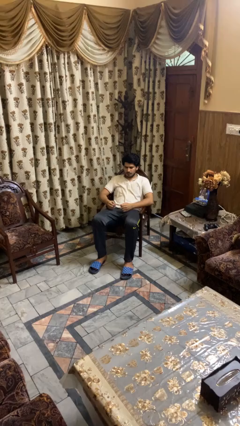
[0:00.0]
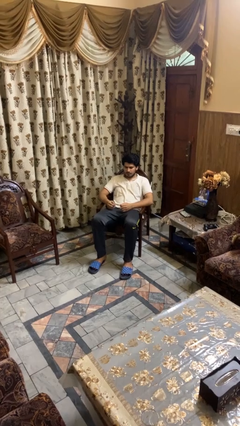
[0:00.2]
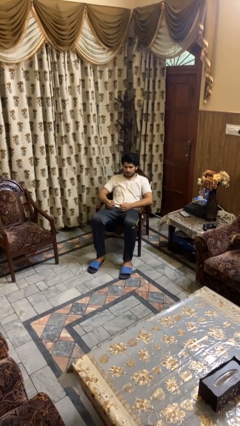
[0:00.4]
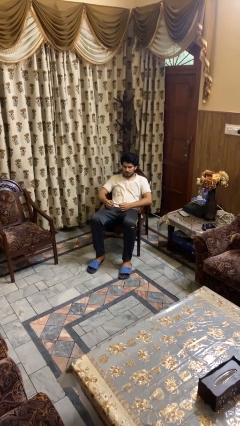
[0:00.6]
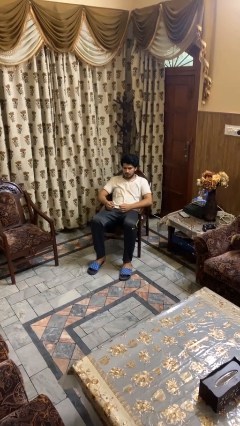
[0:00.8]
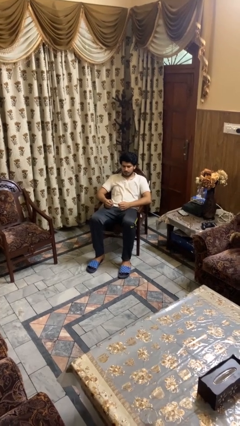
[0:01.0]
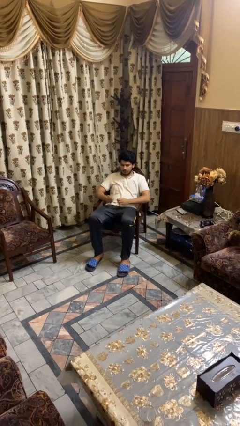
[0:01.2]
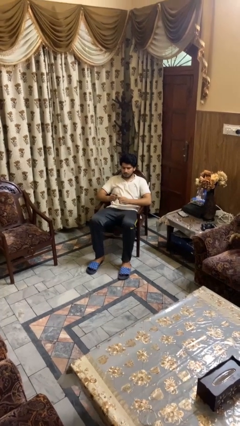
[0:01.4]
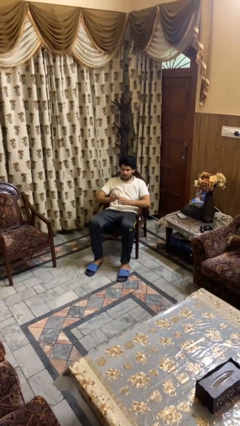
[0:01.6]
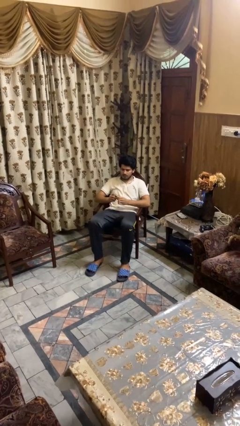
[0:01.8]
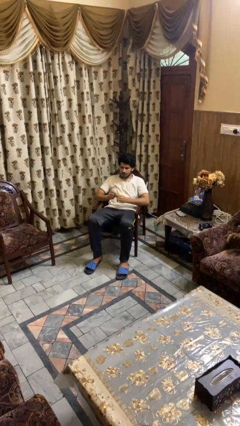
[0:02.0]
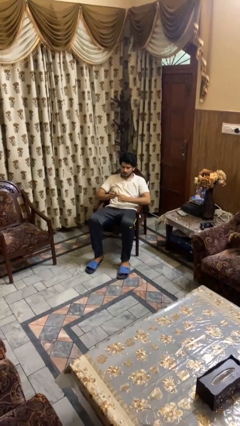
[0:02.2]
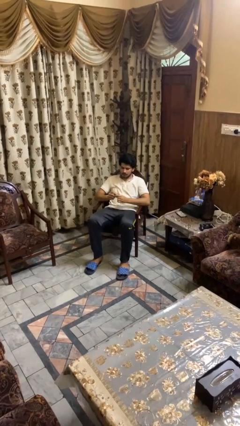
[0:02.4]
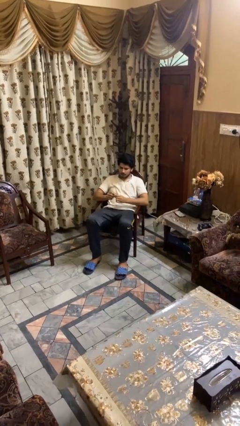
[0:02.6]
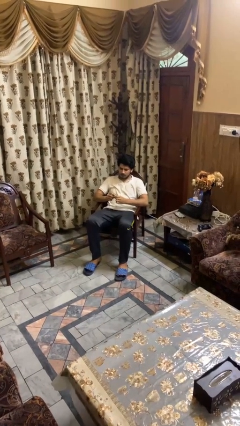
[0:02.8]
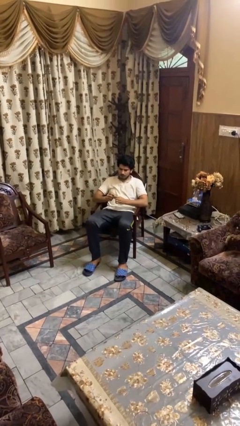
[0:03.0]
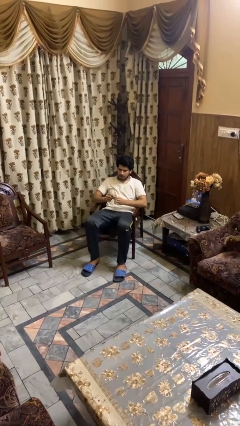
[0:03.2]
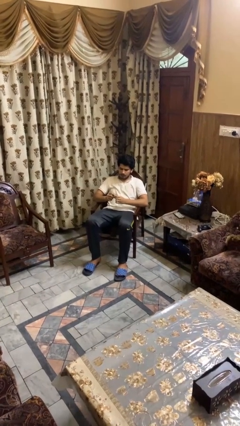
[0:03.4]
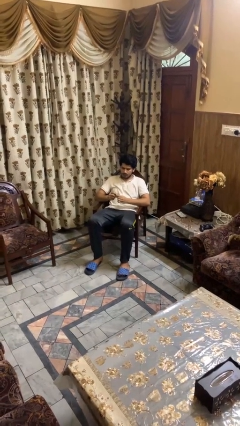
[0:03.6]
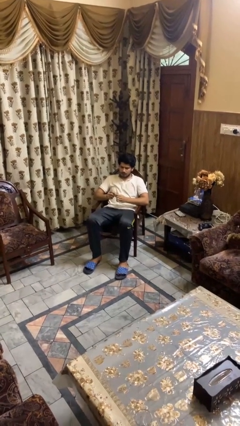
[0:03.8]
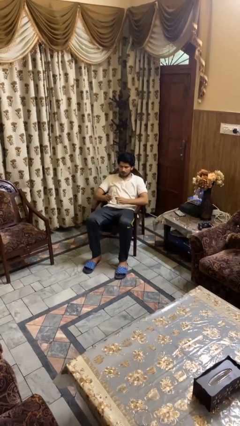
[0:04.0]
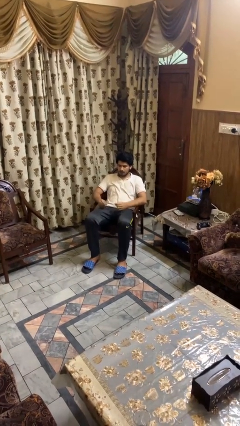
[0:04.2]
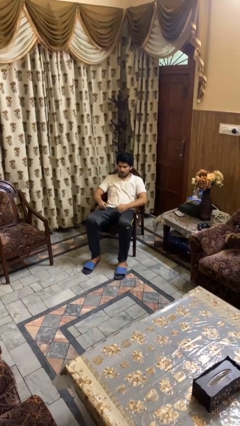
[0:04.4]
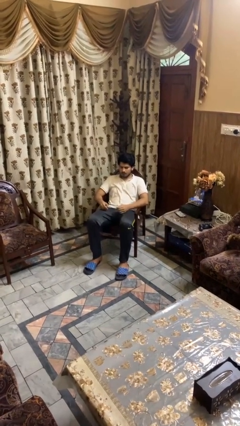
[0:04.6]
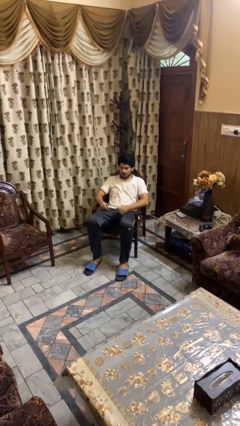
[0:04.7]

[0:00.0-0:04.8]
person files fingernails

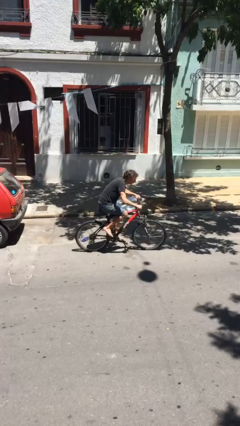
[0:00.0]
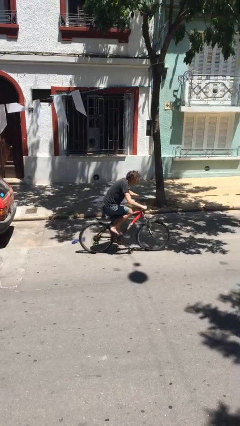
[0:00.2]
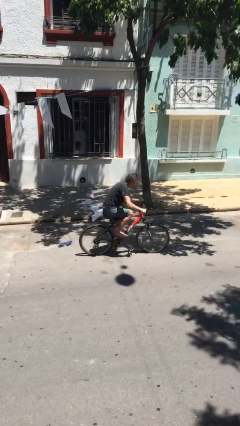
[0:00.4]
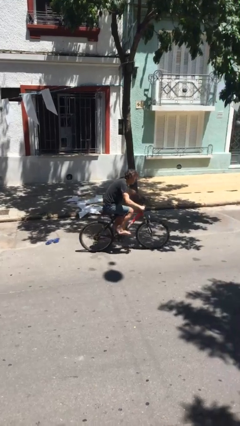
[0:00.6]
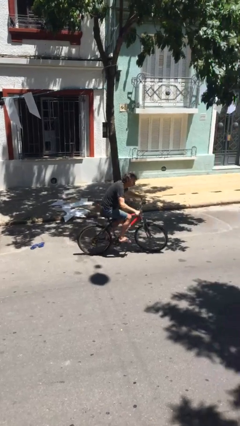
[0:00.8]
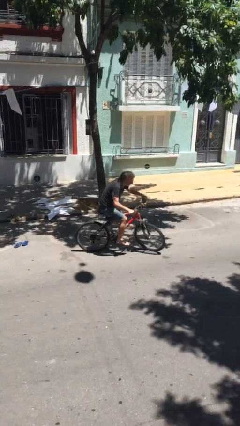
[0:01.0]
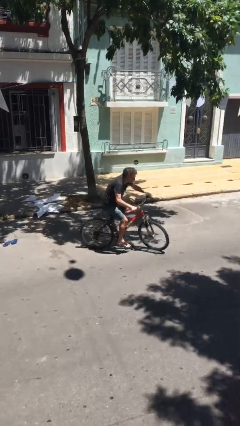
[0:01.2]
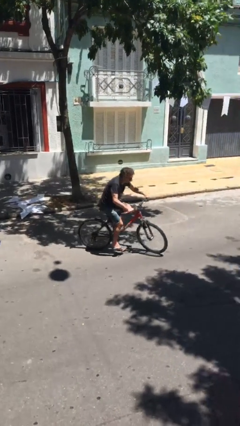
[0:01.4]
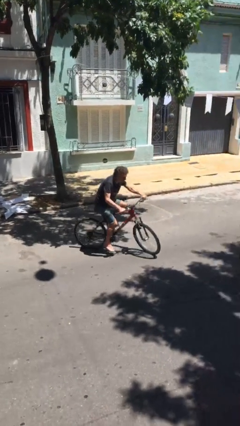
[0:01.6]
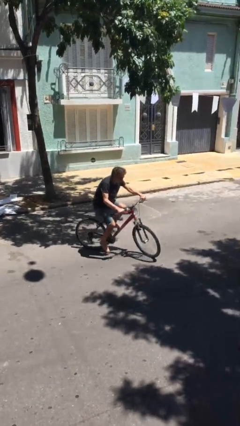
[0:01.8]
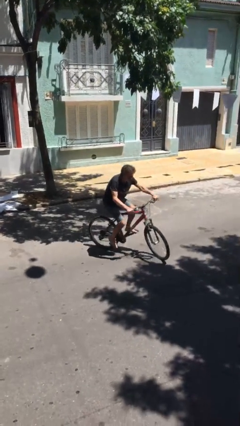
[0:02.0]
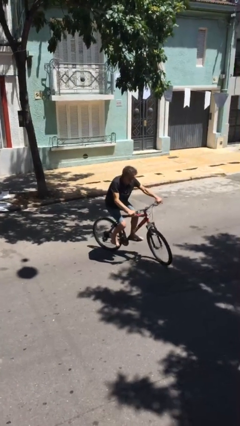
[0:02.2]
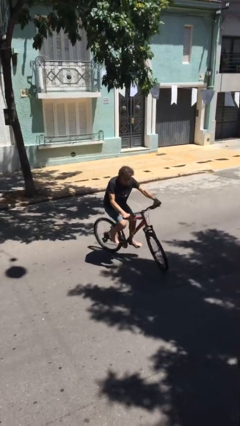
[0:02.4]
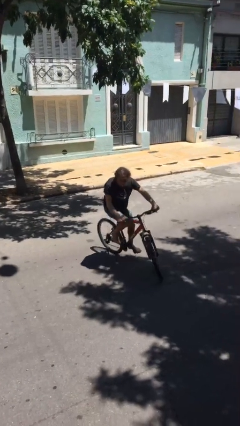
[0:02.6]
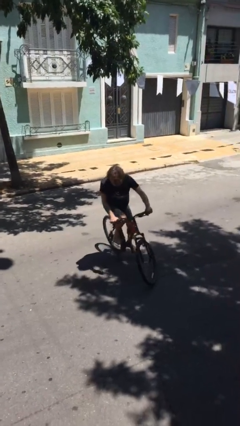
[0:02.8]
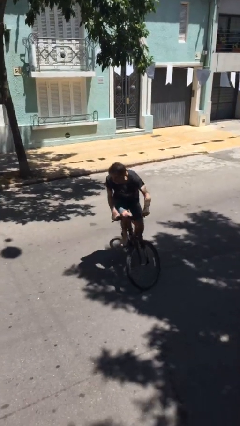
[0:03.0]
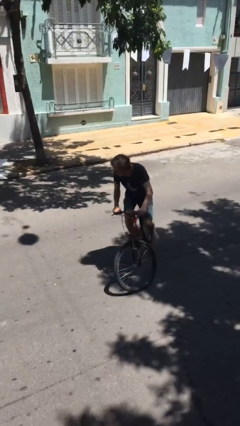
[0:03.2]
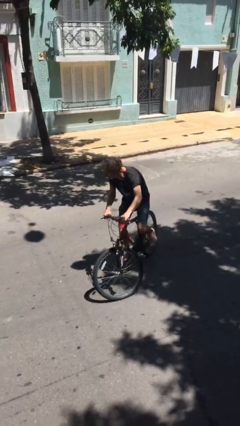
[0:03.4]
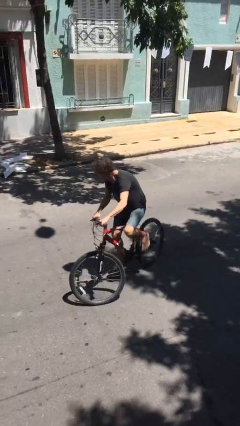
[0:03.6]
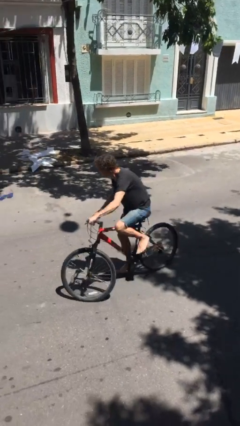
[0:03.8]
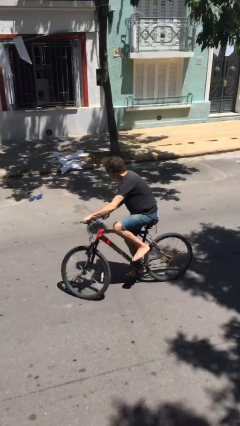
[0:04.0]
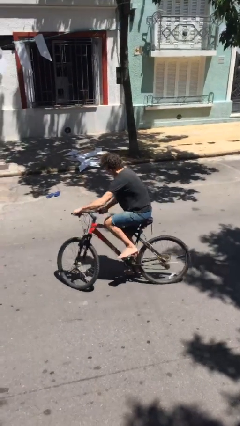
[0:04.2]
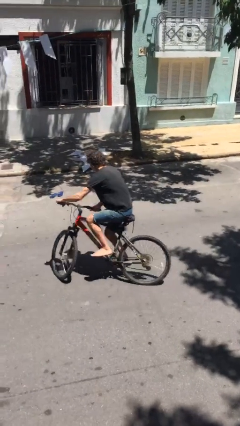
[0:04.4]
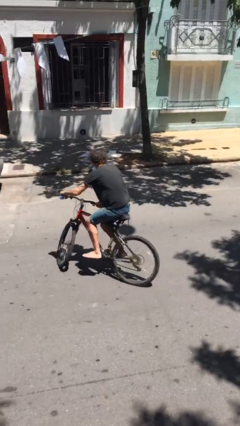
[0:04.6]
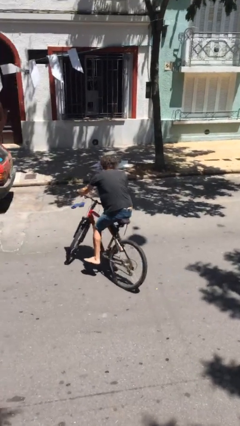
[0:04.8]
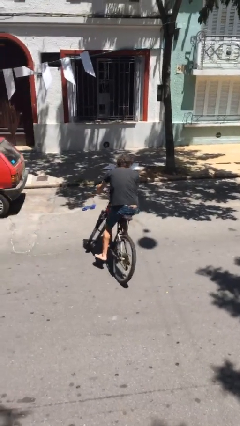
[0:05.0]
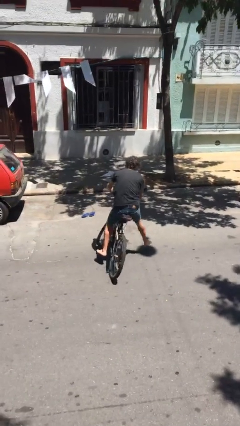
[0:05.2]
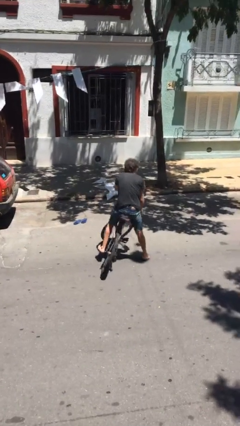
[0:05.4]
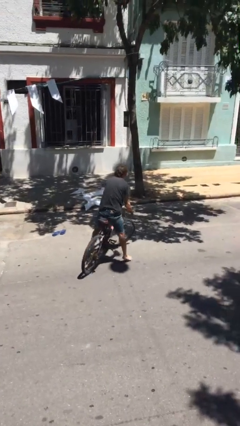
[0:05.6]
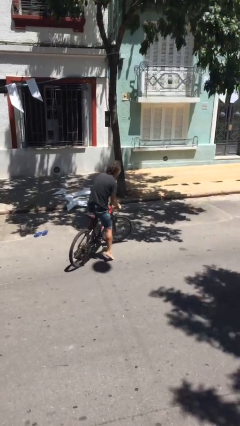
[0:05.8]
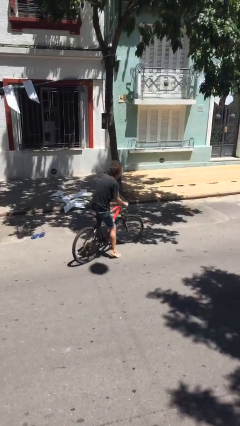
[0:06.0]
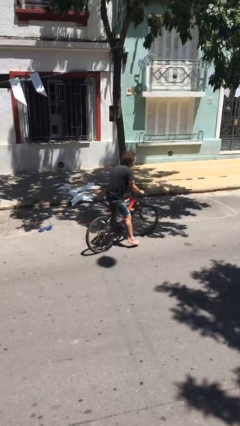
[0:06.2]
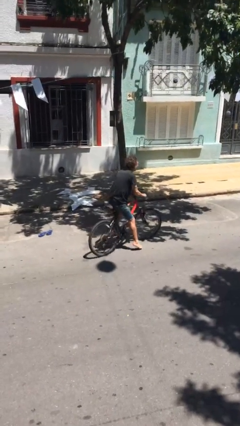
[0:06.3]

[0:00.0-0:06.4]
person rides bicycle

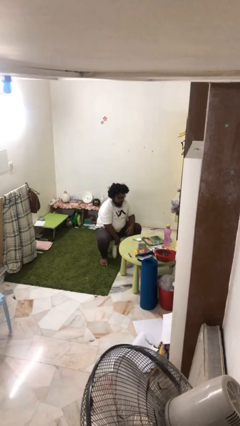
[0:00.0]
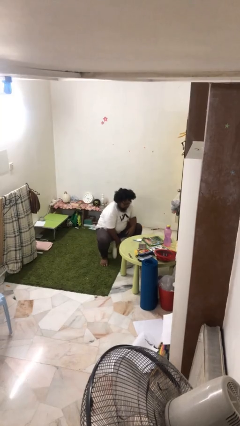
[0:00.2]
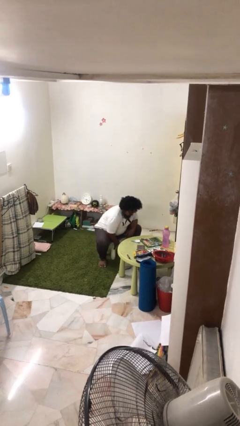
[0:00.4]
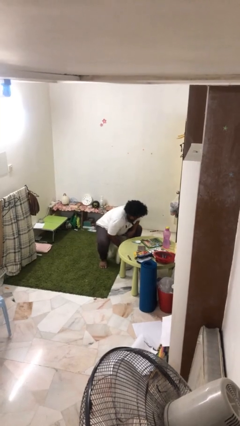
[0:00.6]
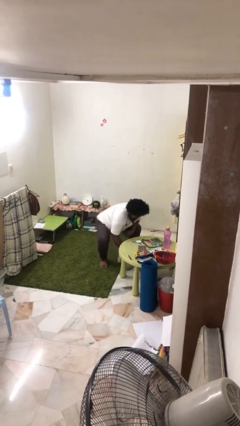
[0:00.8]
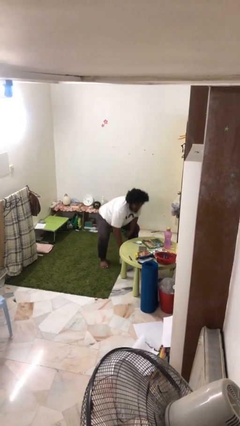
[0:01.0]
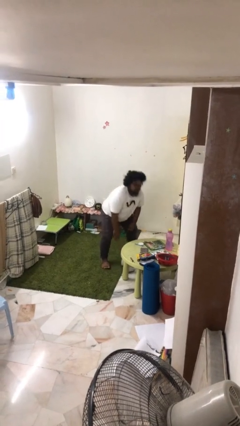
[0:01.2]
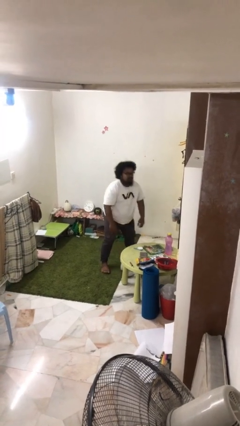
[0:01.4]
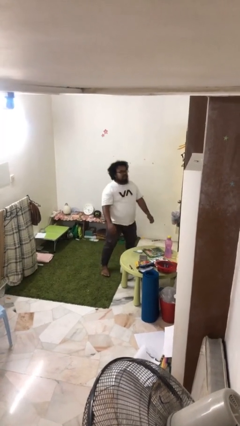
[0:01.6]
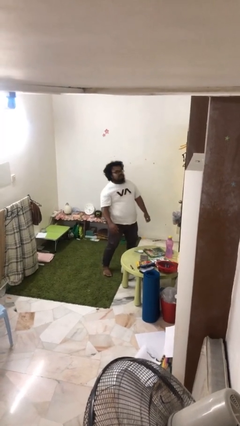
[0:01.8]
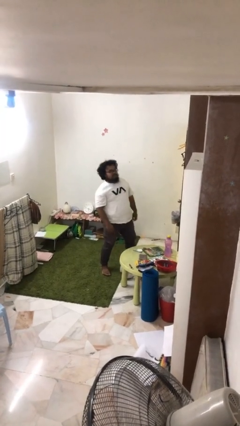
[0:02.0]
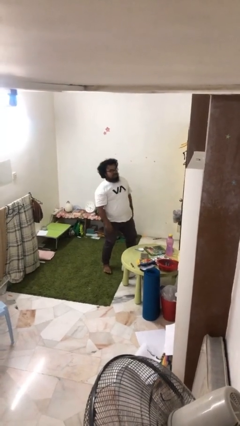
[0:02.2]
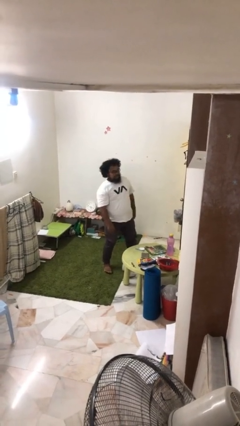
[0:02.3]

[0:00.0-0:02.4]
person stands up

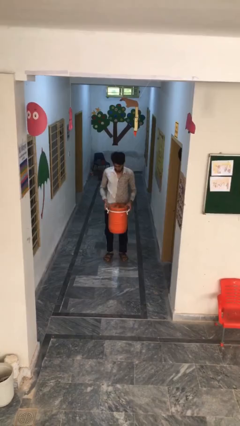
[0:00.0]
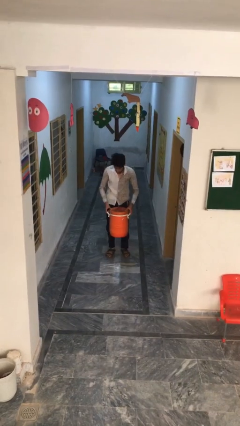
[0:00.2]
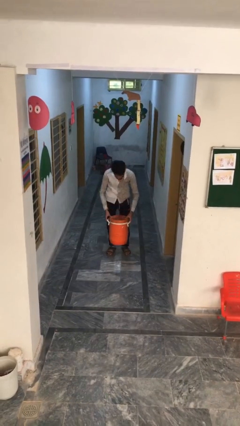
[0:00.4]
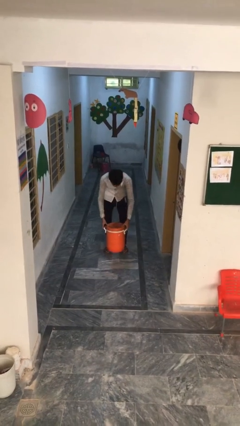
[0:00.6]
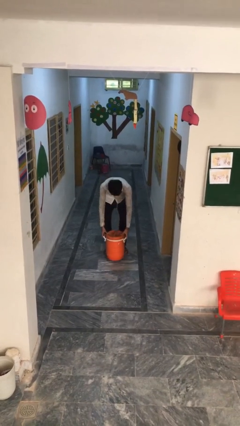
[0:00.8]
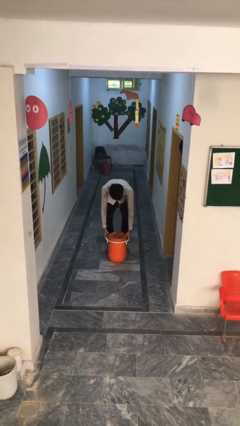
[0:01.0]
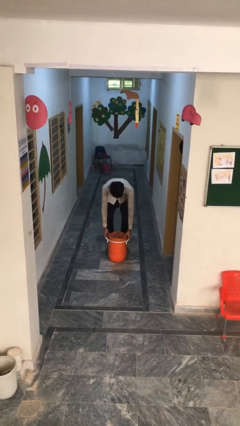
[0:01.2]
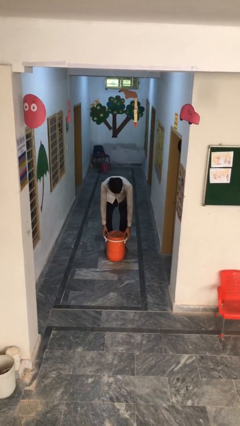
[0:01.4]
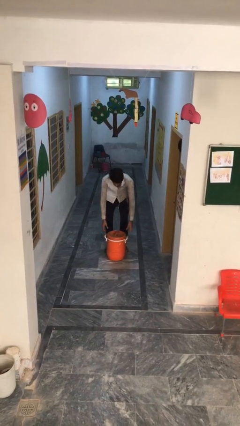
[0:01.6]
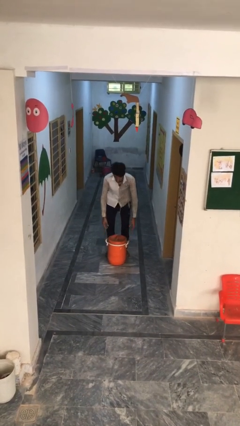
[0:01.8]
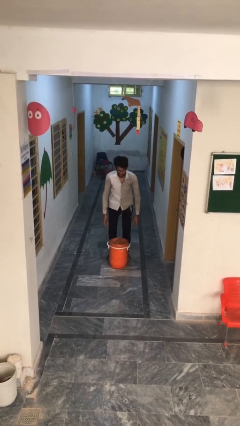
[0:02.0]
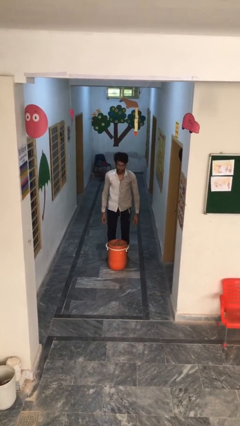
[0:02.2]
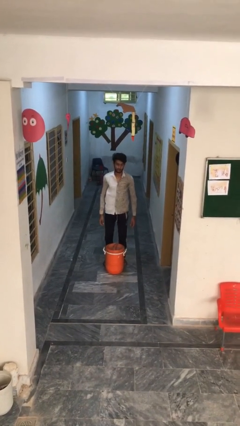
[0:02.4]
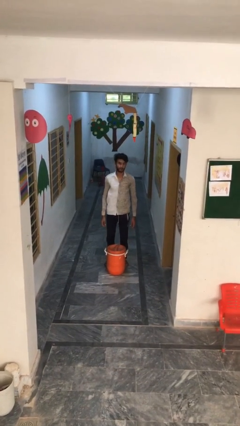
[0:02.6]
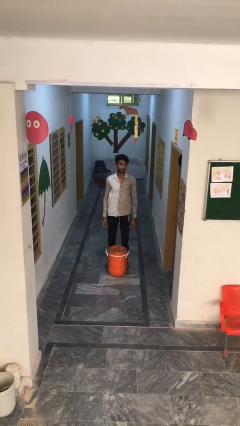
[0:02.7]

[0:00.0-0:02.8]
person puts down object on floor

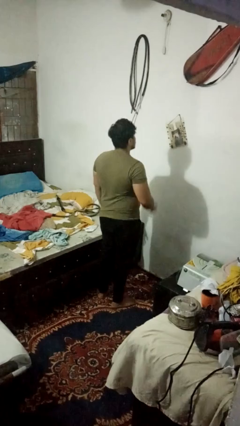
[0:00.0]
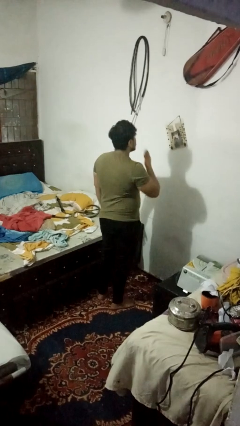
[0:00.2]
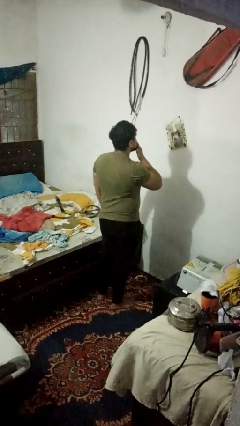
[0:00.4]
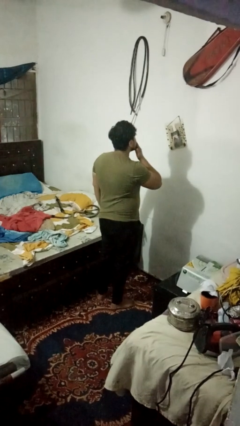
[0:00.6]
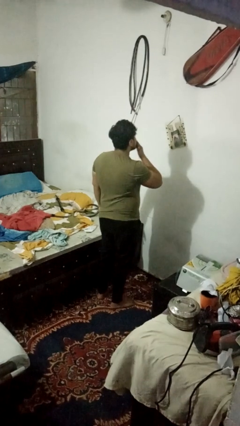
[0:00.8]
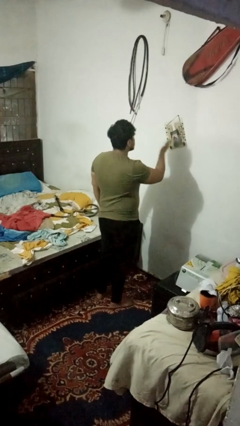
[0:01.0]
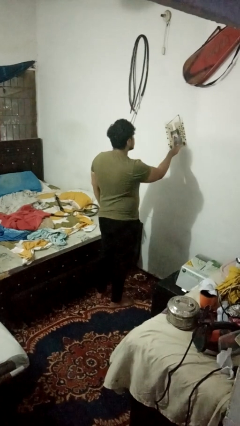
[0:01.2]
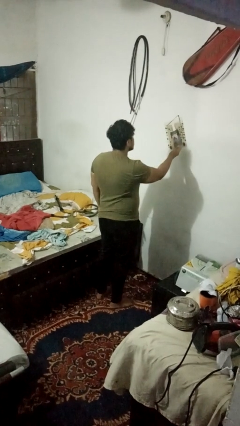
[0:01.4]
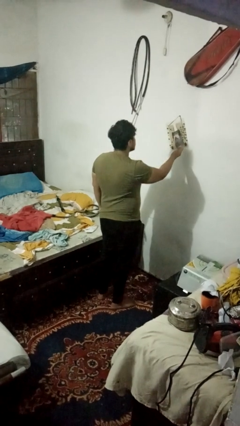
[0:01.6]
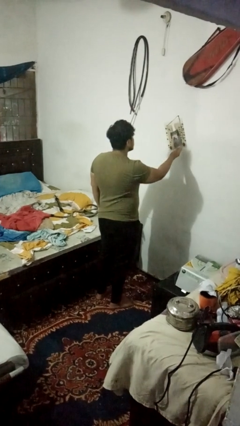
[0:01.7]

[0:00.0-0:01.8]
person gestures blow kiss
